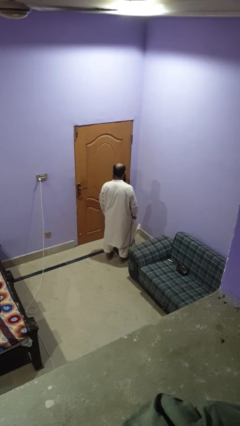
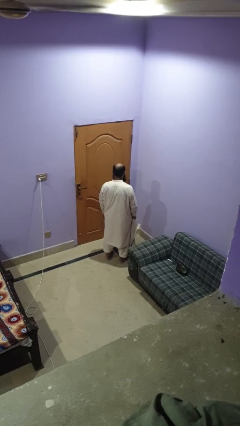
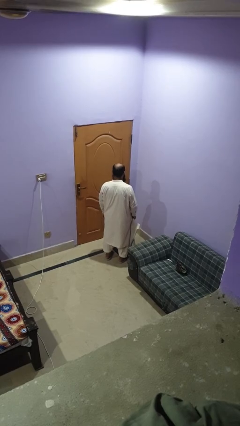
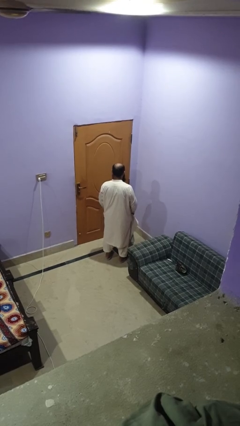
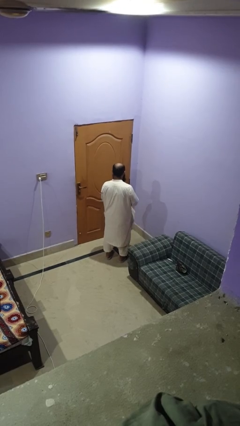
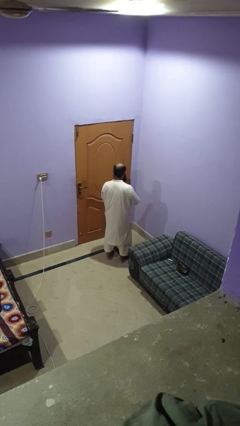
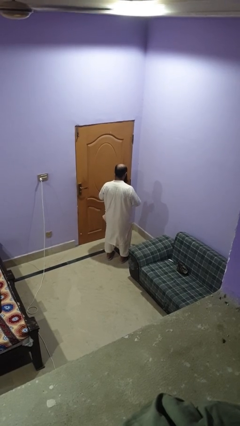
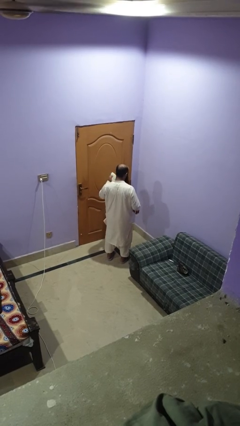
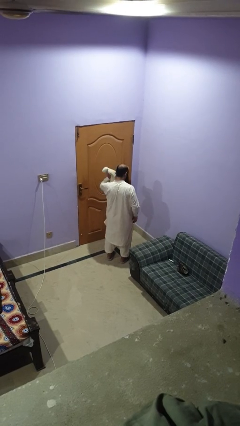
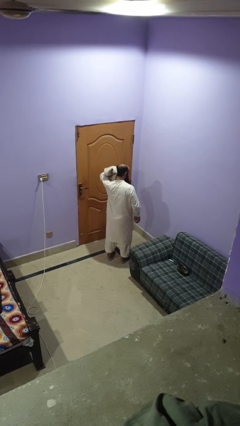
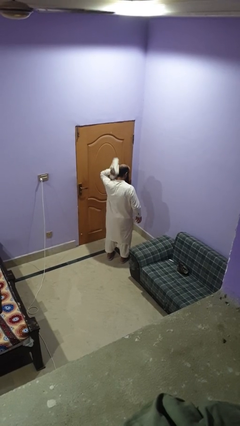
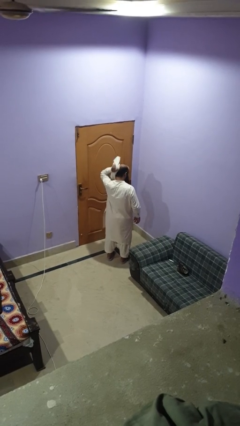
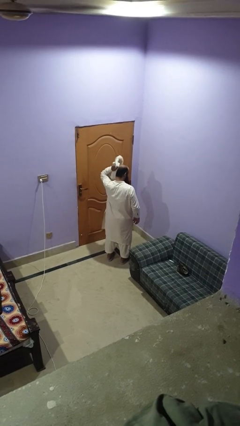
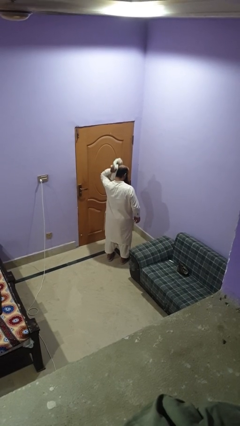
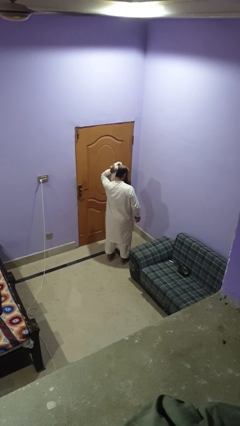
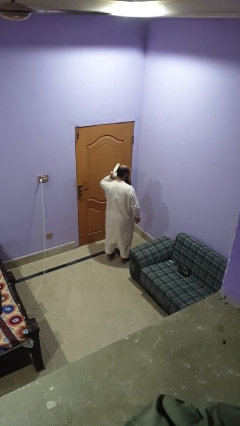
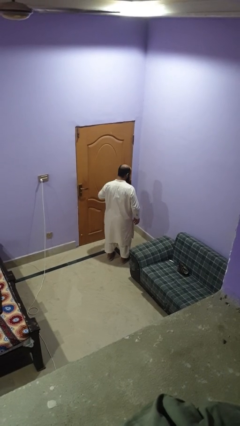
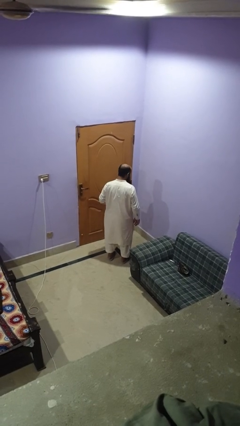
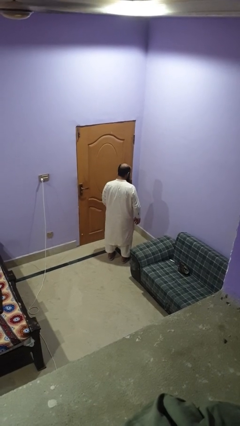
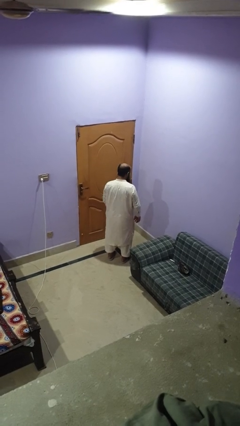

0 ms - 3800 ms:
person dries hair with towel

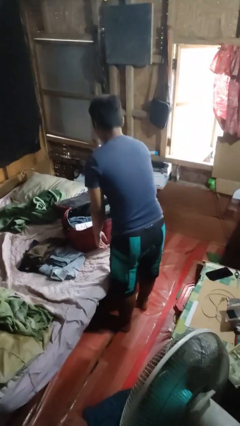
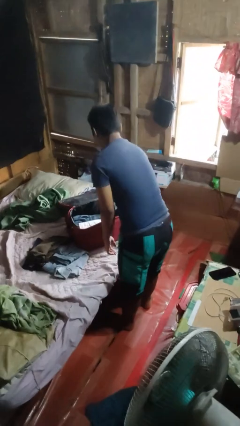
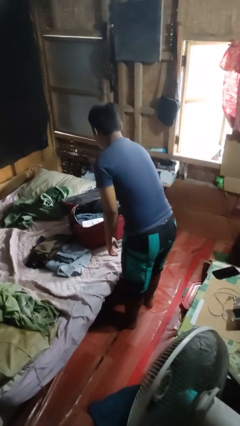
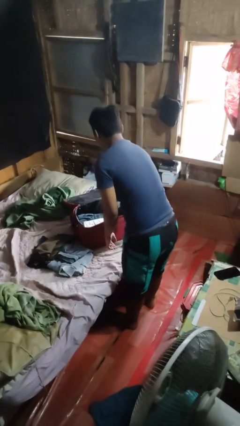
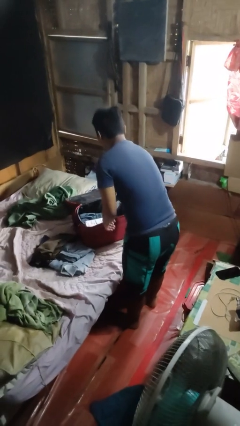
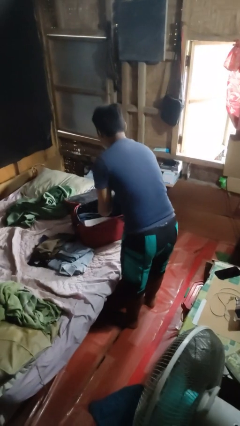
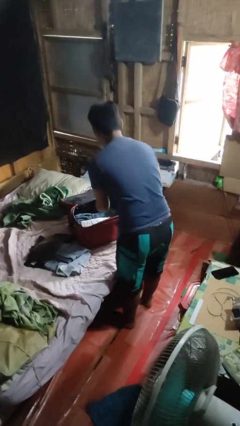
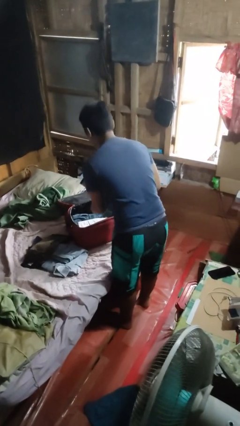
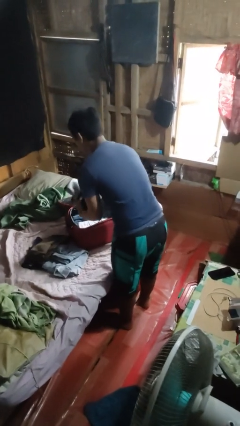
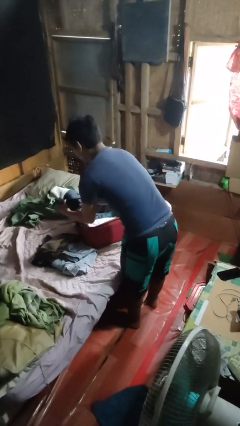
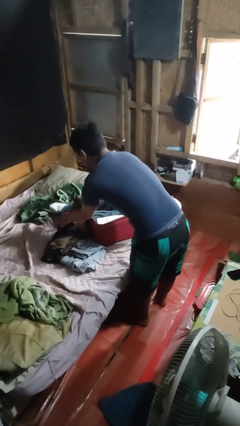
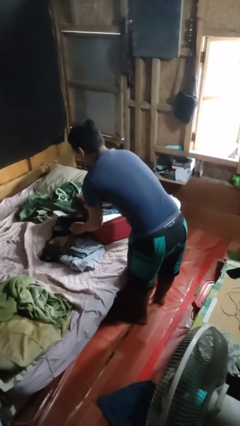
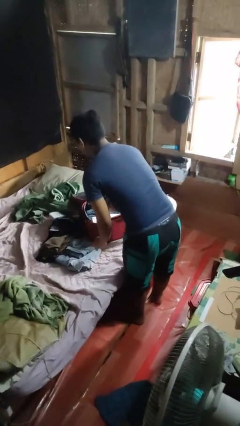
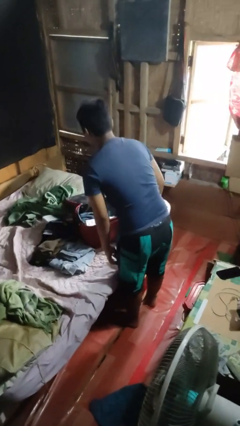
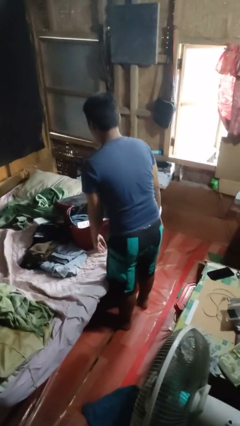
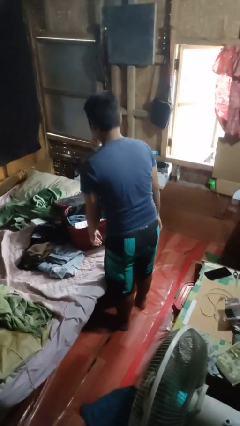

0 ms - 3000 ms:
person unloads clothes from suitcase

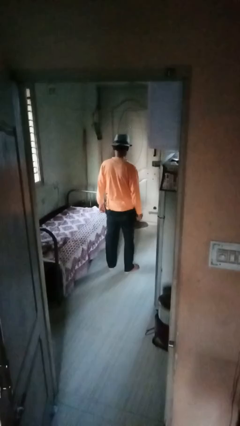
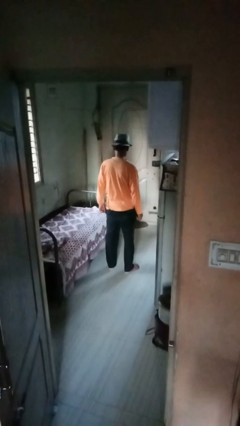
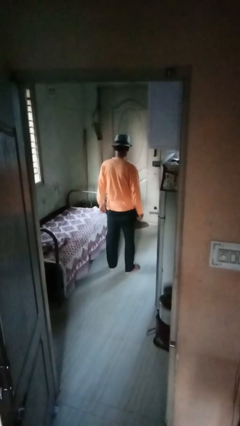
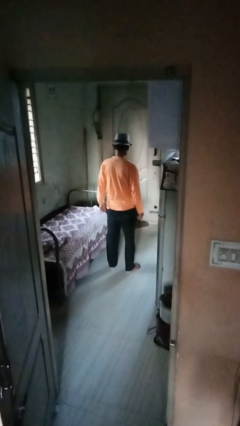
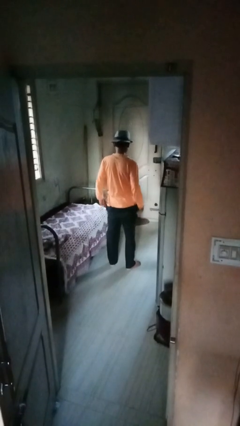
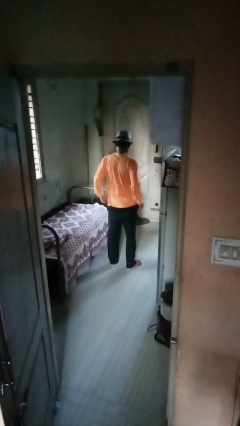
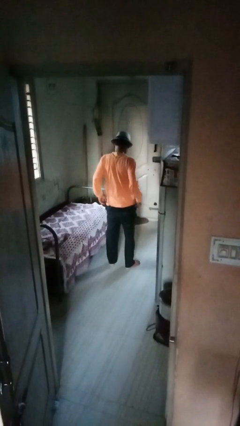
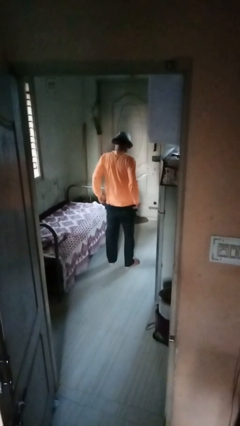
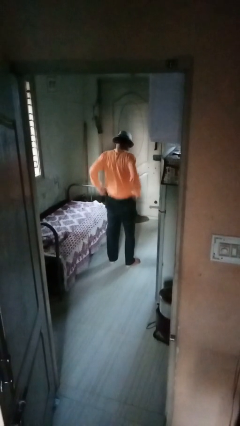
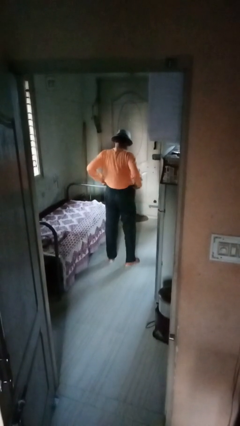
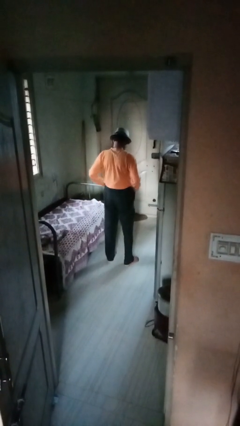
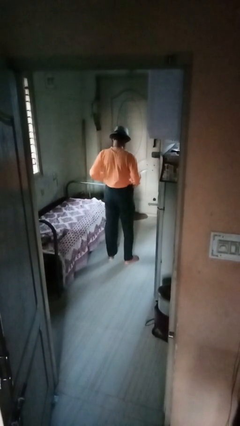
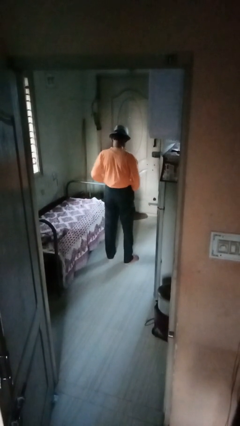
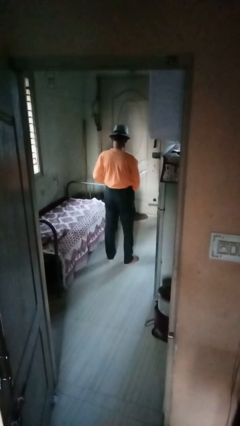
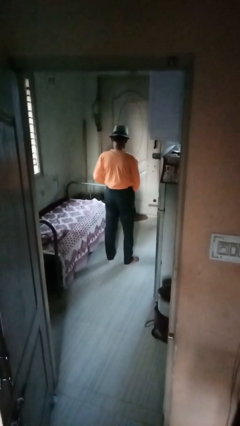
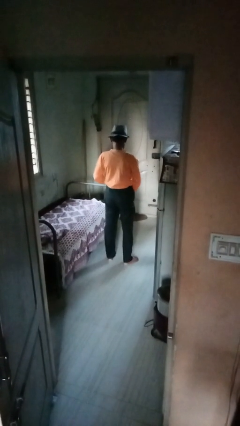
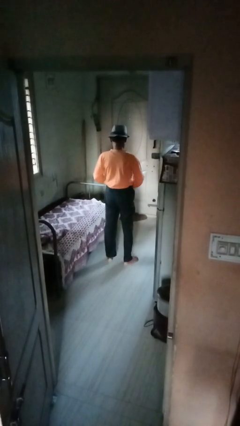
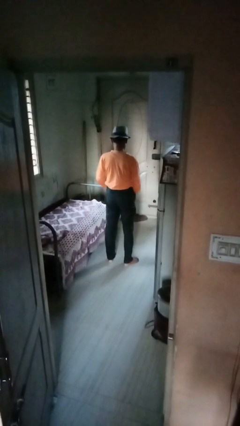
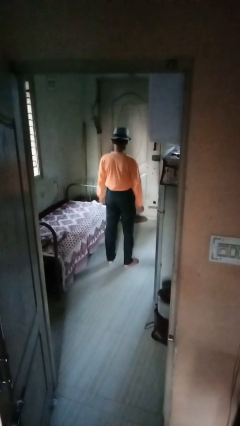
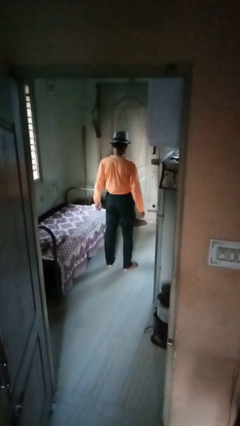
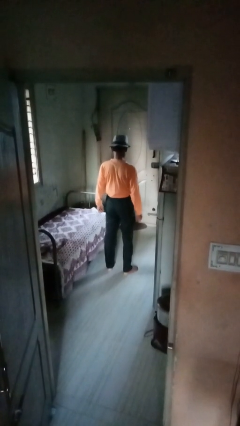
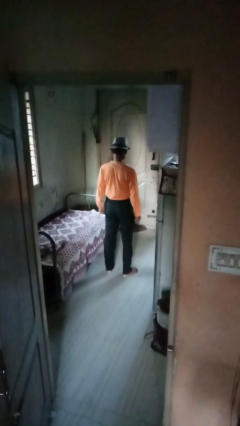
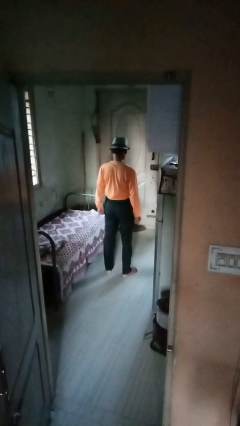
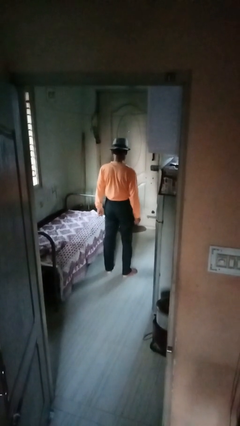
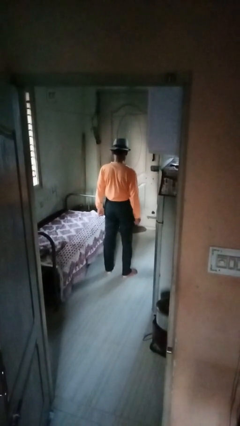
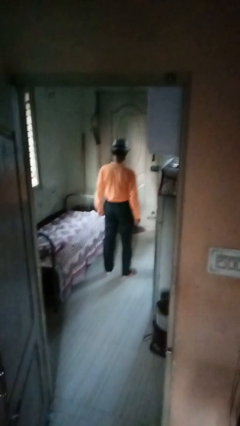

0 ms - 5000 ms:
person hikes up pants

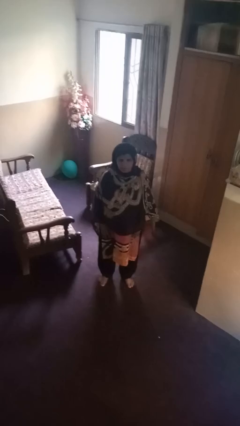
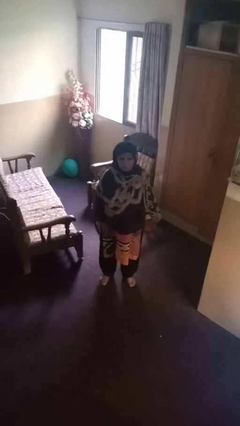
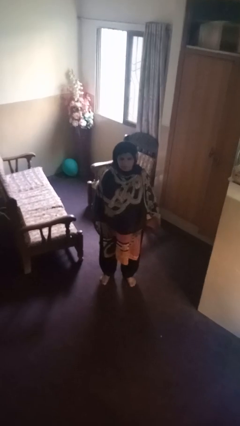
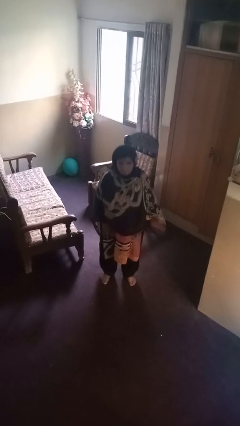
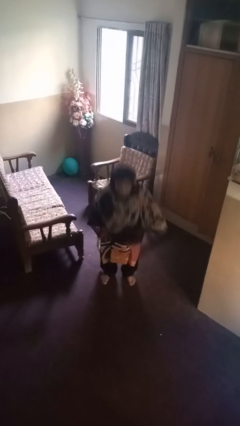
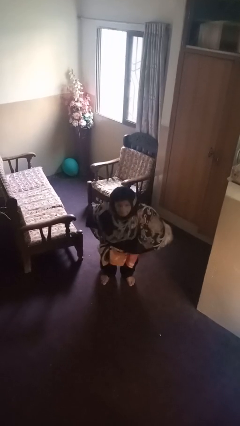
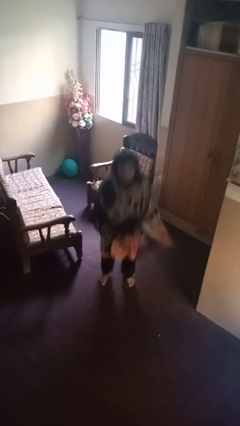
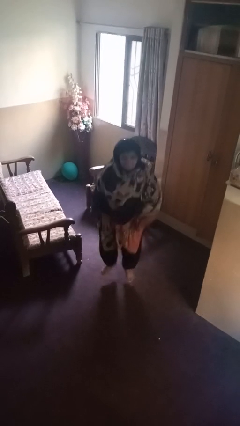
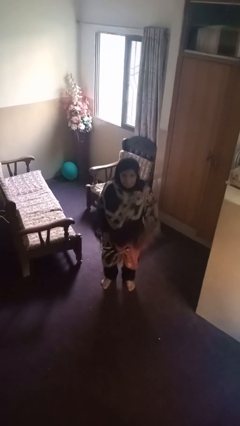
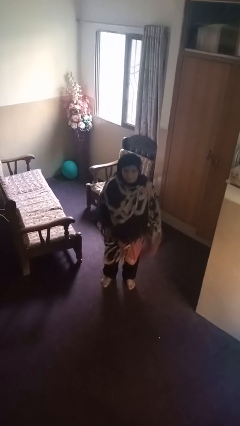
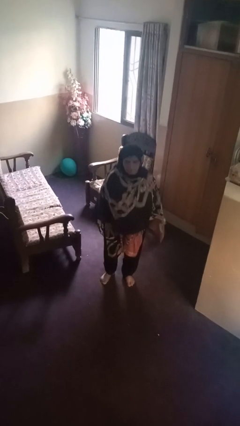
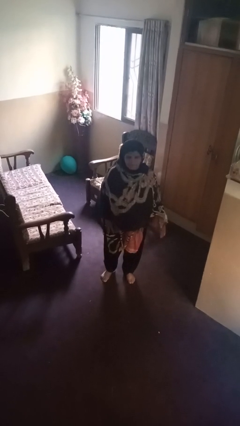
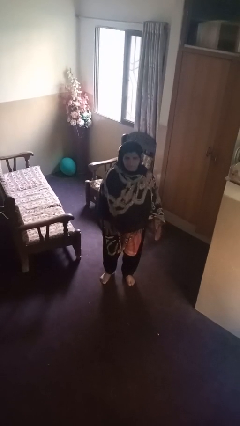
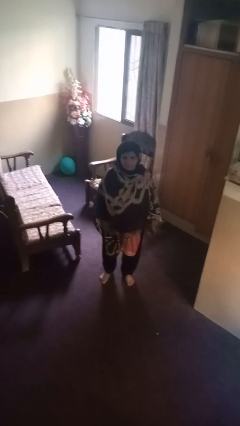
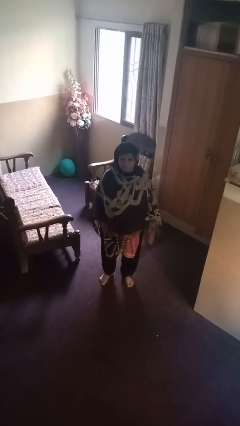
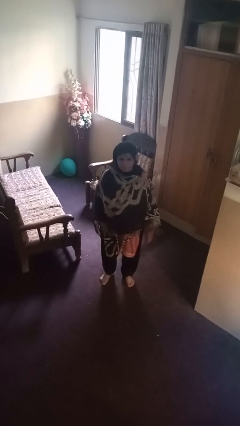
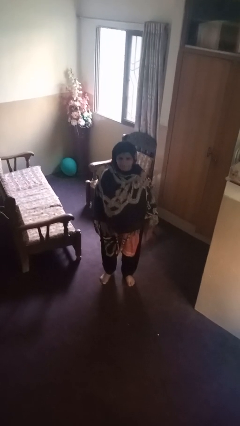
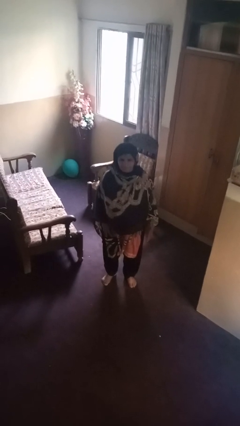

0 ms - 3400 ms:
person jumps

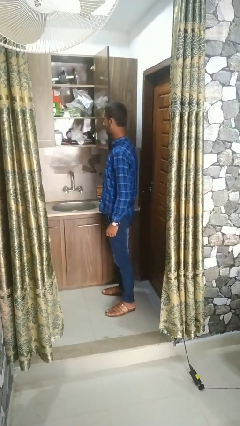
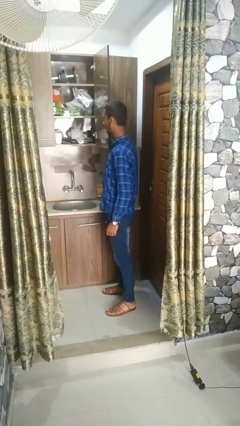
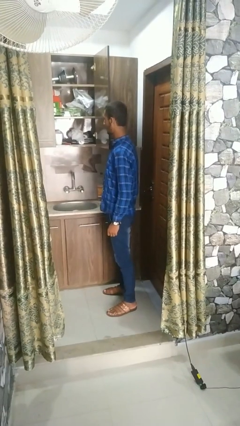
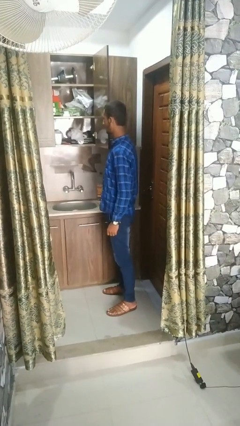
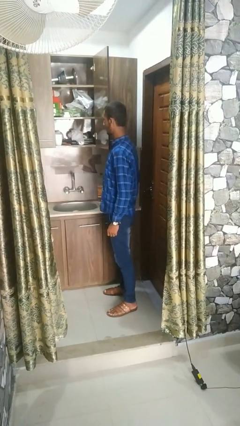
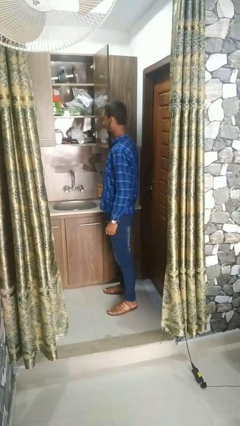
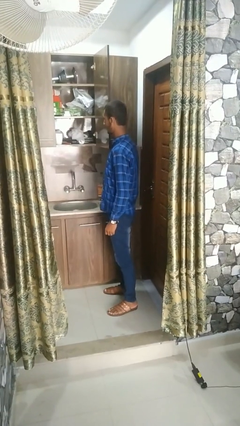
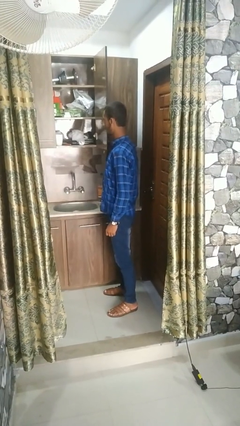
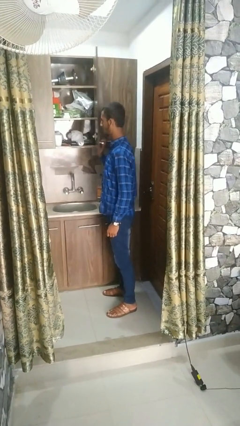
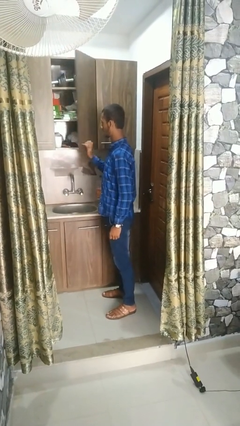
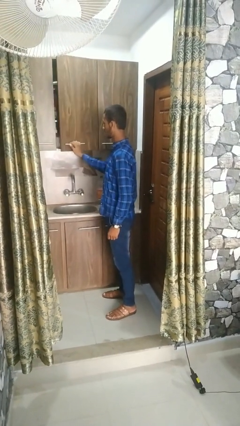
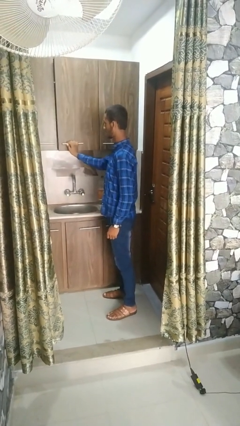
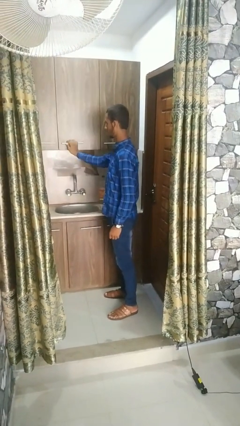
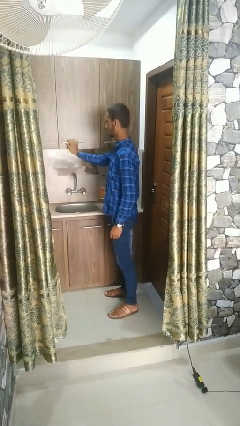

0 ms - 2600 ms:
person closes cabinet
